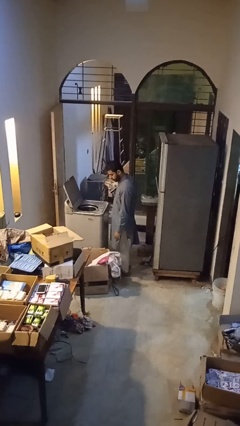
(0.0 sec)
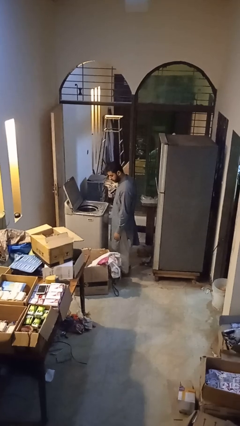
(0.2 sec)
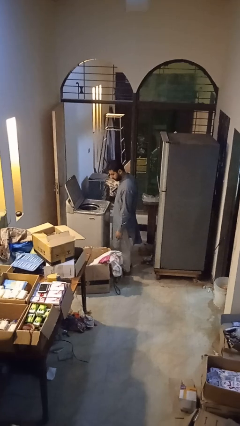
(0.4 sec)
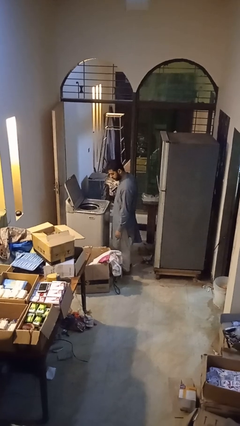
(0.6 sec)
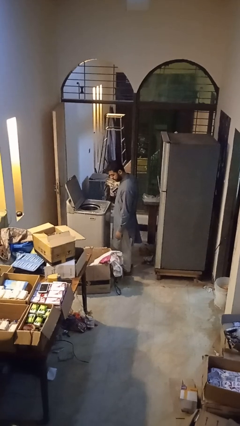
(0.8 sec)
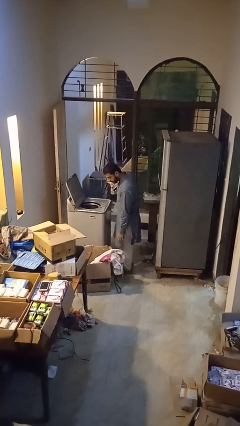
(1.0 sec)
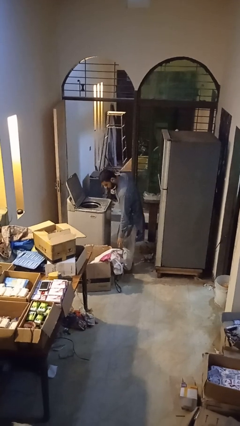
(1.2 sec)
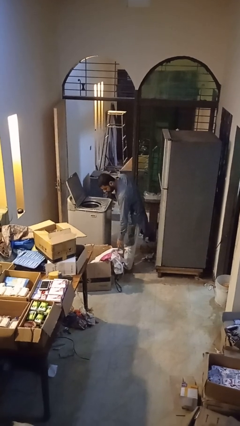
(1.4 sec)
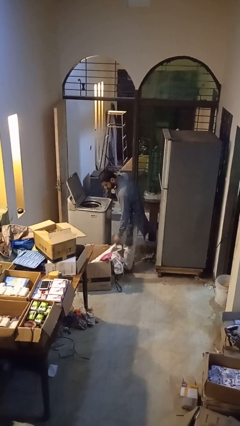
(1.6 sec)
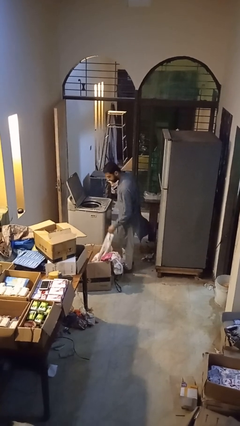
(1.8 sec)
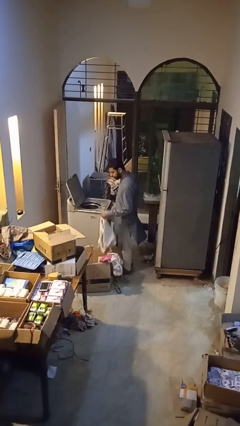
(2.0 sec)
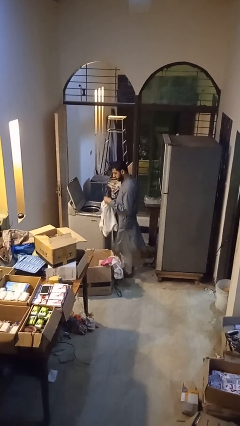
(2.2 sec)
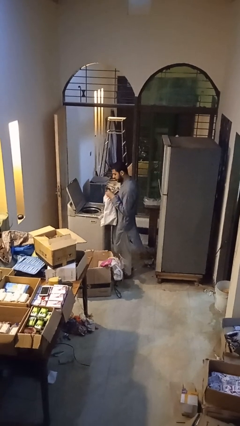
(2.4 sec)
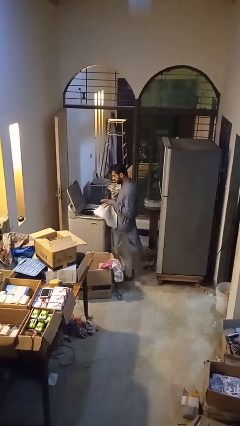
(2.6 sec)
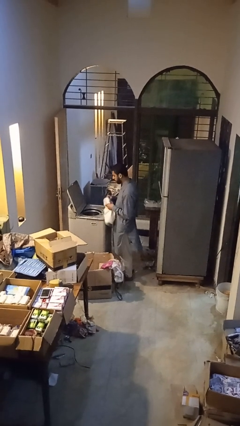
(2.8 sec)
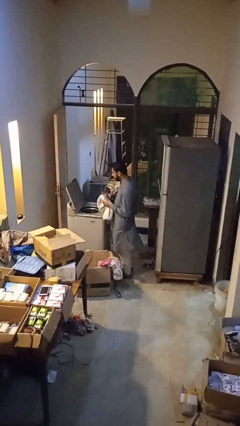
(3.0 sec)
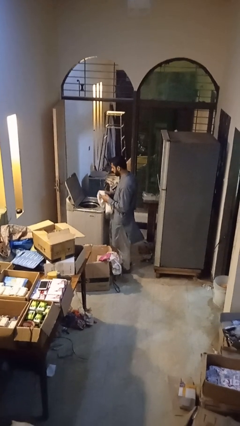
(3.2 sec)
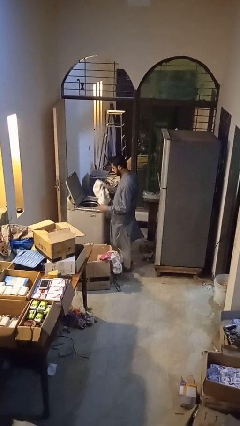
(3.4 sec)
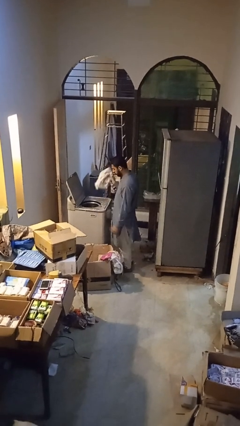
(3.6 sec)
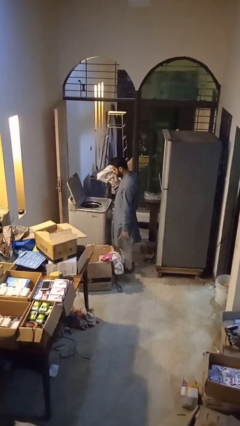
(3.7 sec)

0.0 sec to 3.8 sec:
person unloads clotheswasher

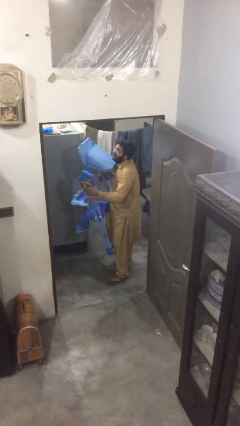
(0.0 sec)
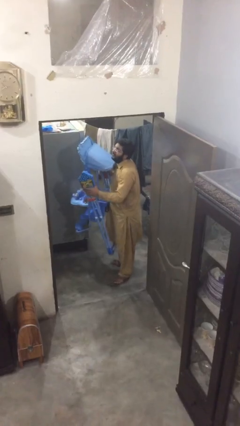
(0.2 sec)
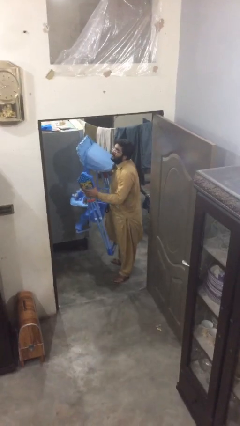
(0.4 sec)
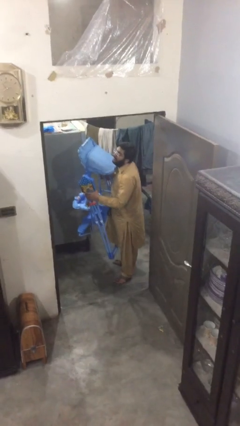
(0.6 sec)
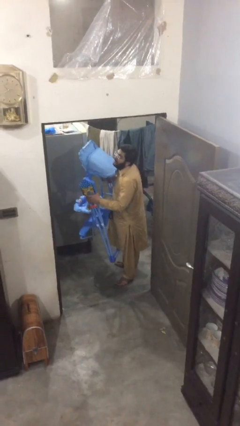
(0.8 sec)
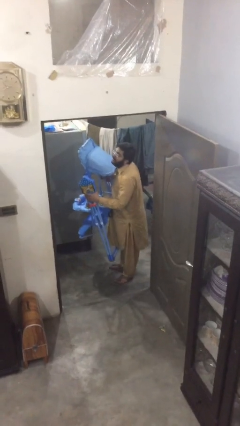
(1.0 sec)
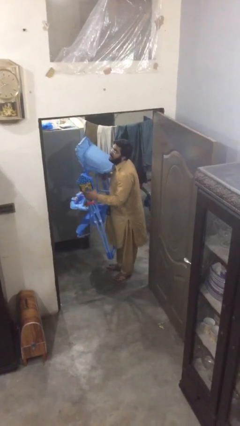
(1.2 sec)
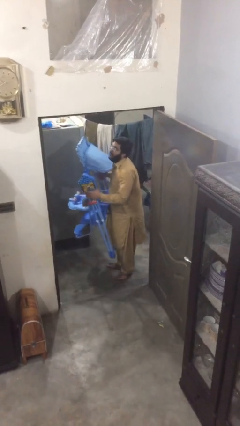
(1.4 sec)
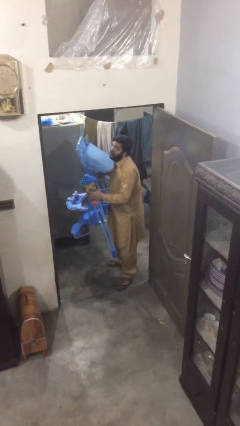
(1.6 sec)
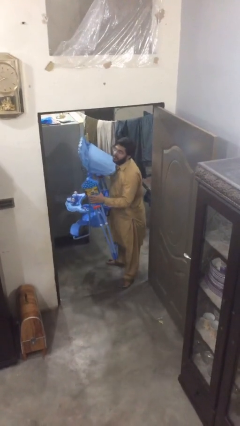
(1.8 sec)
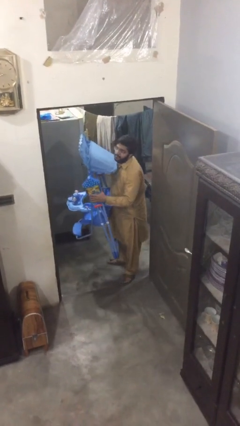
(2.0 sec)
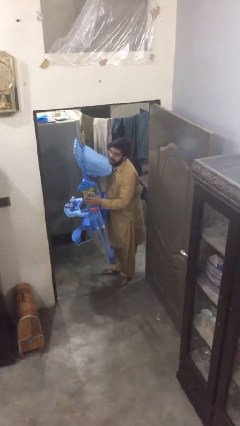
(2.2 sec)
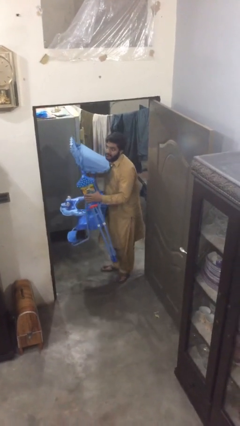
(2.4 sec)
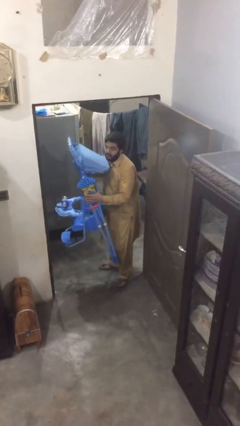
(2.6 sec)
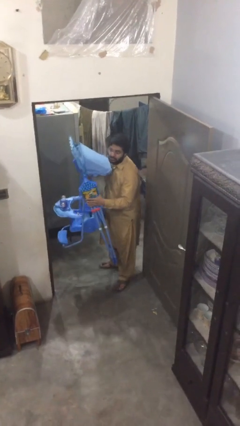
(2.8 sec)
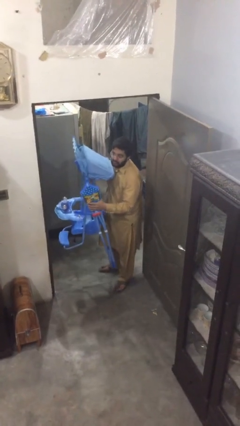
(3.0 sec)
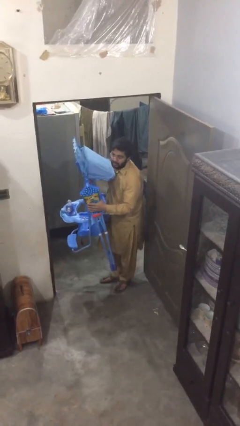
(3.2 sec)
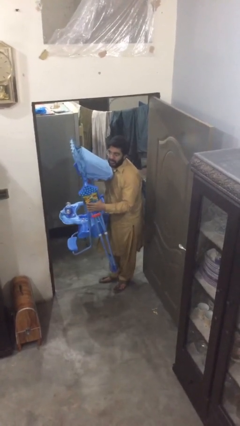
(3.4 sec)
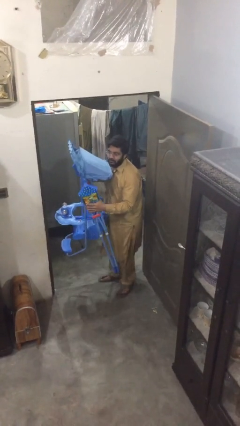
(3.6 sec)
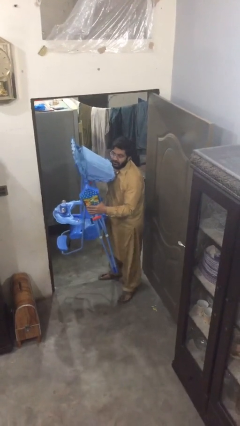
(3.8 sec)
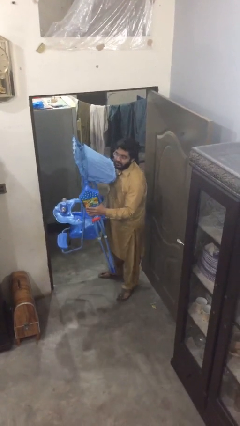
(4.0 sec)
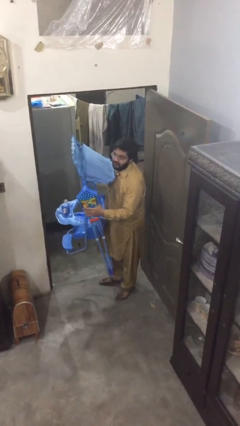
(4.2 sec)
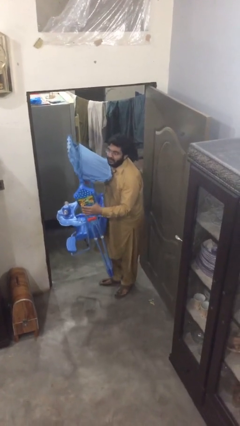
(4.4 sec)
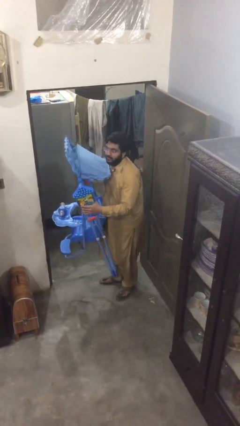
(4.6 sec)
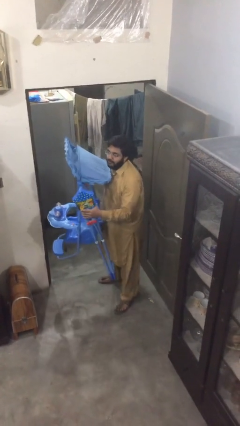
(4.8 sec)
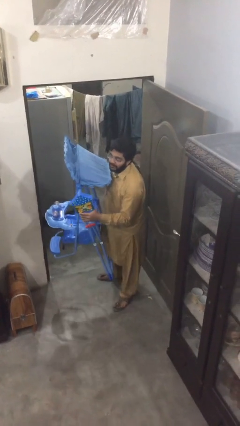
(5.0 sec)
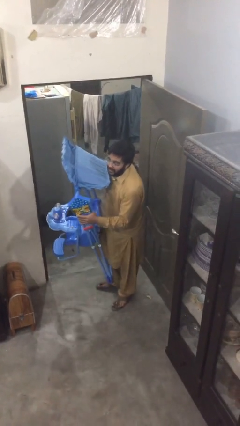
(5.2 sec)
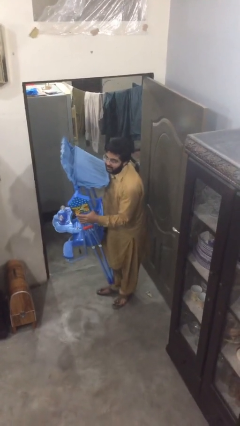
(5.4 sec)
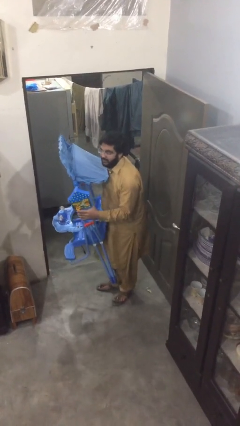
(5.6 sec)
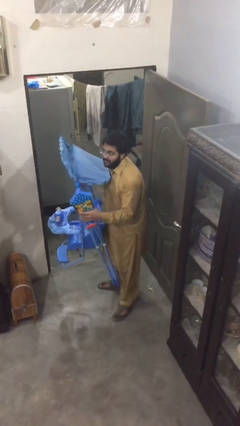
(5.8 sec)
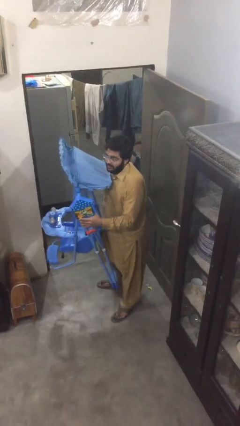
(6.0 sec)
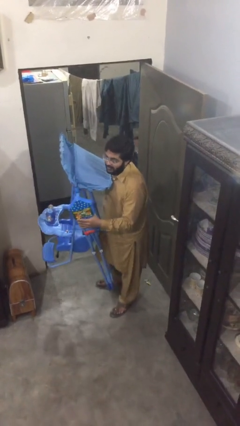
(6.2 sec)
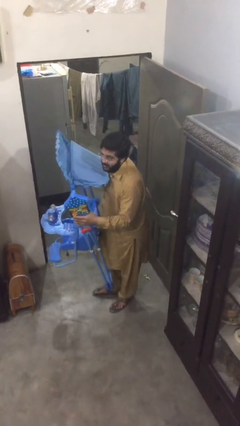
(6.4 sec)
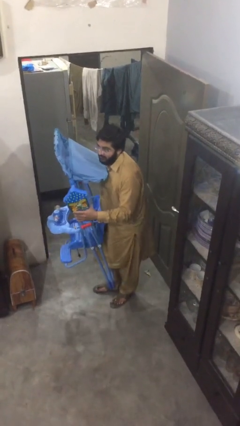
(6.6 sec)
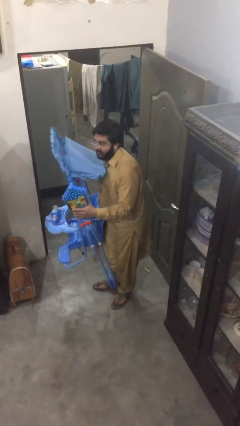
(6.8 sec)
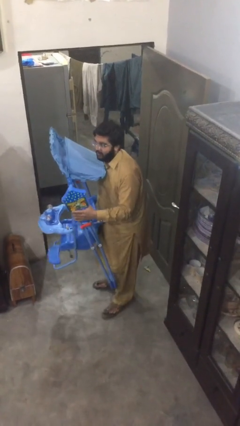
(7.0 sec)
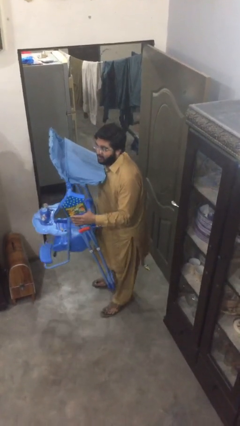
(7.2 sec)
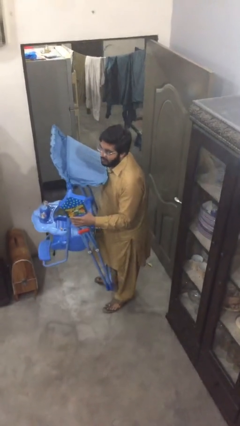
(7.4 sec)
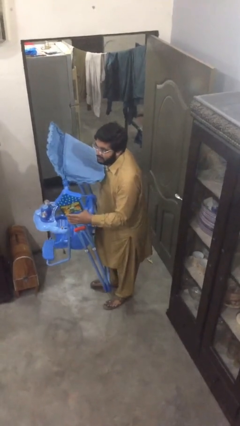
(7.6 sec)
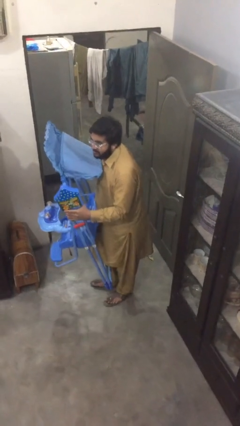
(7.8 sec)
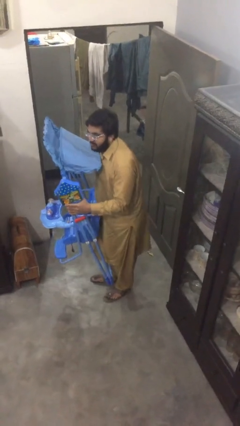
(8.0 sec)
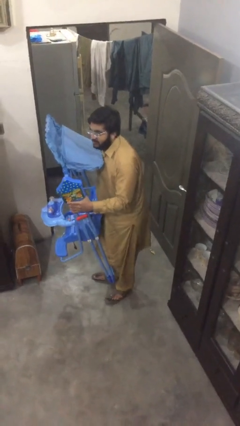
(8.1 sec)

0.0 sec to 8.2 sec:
person carries heavy object

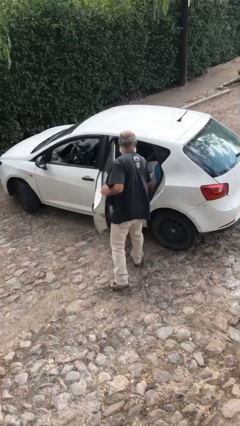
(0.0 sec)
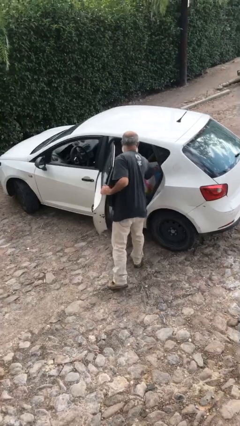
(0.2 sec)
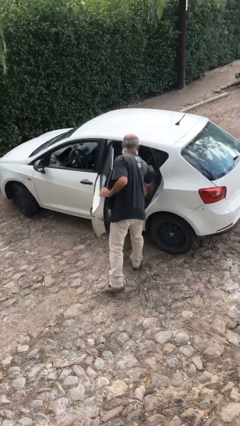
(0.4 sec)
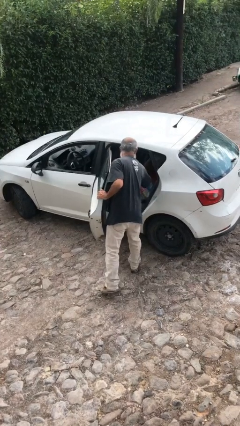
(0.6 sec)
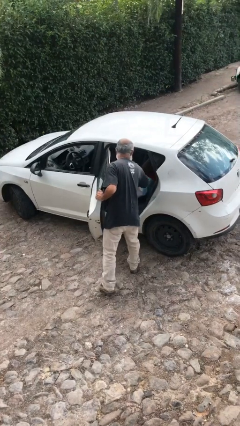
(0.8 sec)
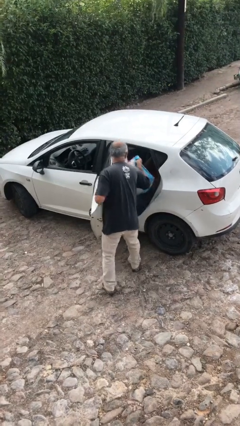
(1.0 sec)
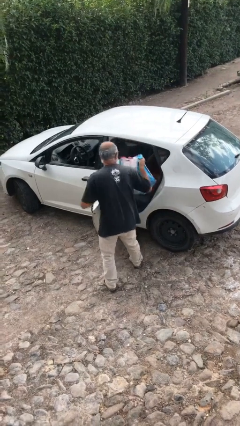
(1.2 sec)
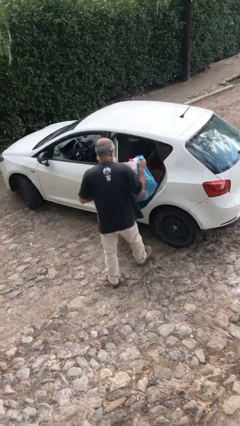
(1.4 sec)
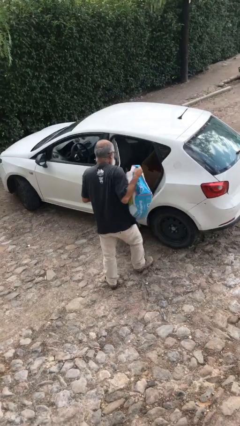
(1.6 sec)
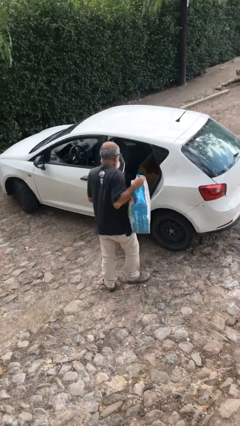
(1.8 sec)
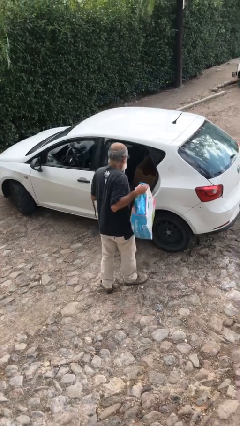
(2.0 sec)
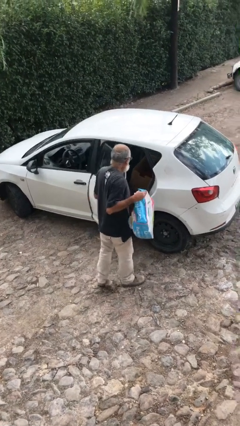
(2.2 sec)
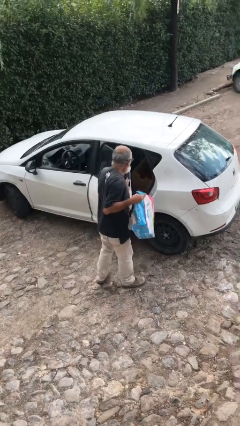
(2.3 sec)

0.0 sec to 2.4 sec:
person unloads car

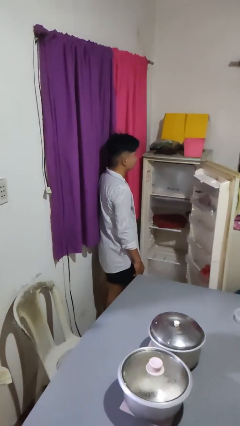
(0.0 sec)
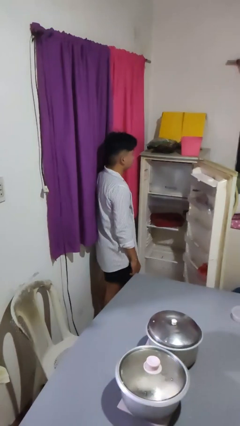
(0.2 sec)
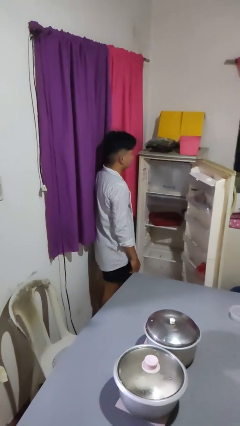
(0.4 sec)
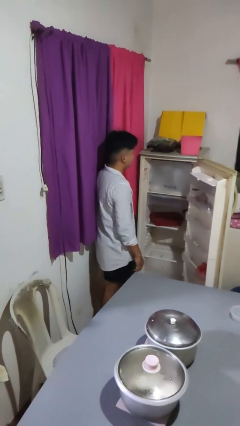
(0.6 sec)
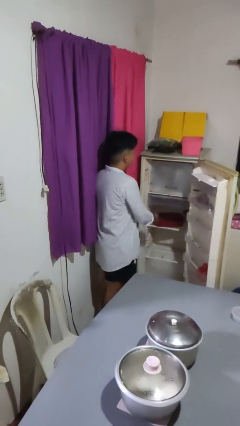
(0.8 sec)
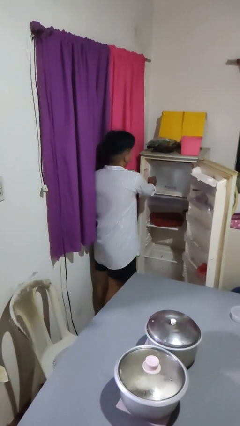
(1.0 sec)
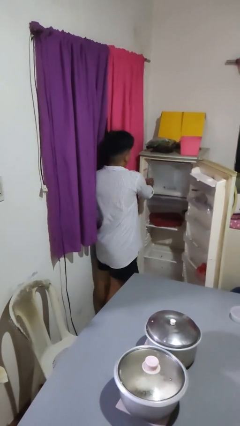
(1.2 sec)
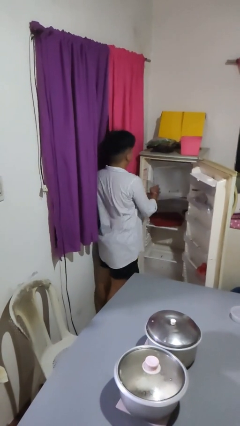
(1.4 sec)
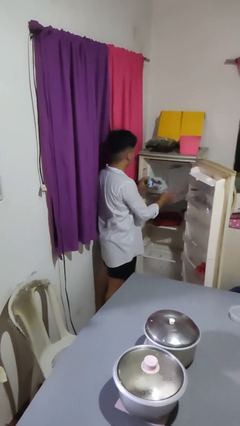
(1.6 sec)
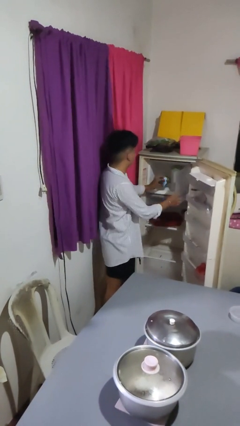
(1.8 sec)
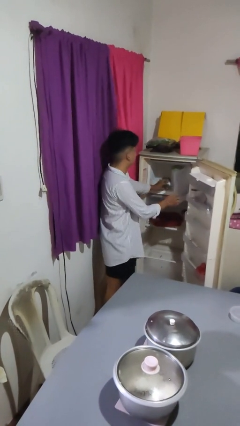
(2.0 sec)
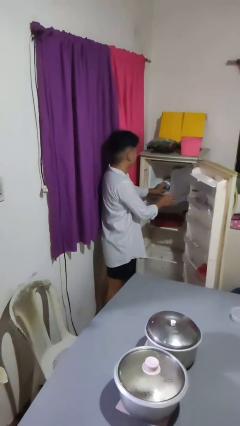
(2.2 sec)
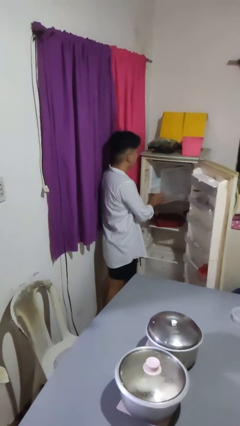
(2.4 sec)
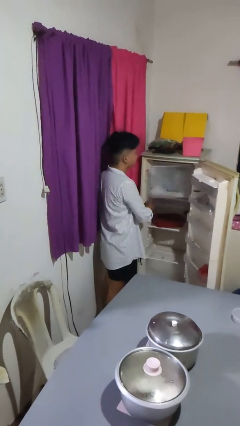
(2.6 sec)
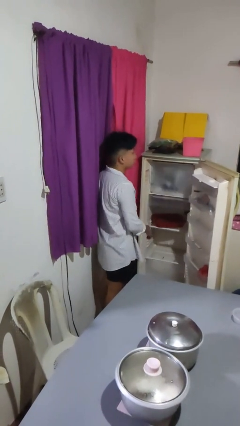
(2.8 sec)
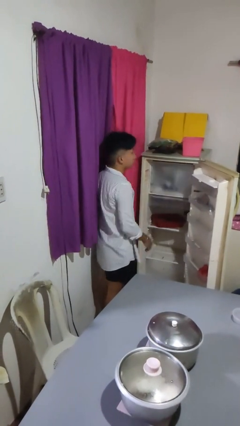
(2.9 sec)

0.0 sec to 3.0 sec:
person puts object into refrigerator
